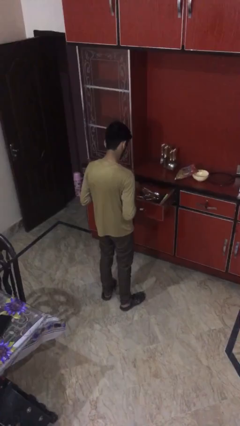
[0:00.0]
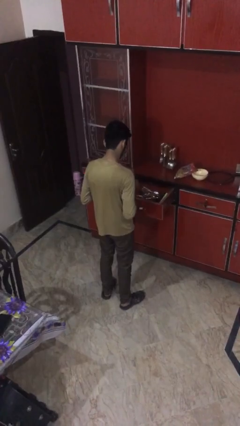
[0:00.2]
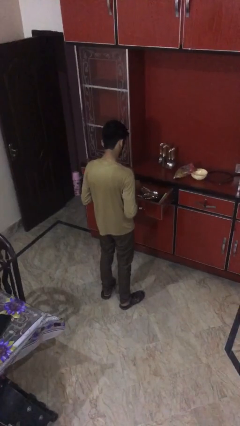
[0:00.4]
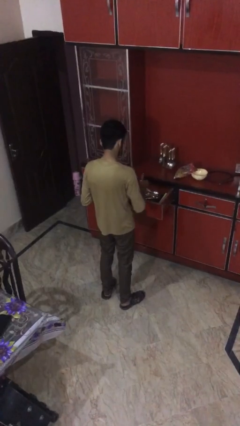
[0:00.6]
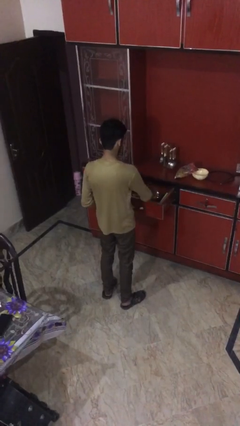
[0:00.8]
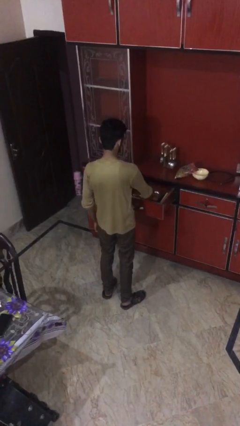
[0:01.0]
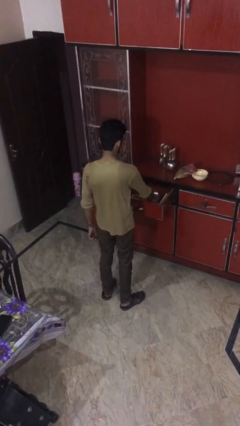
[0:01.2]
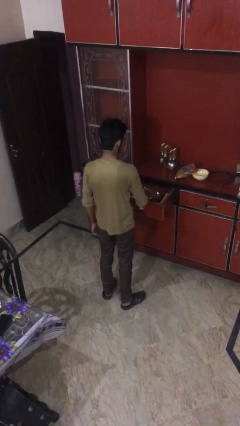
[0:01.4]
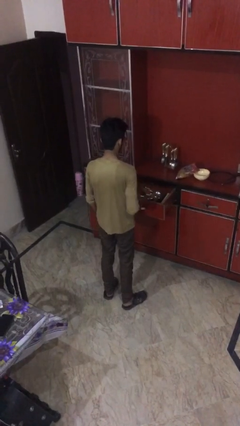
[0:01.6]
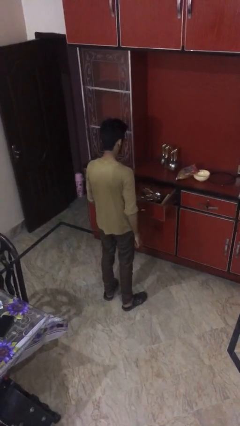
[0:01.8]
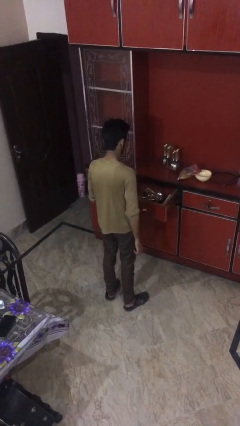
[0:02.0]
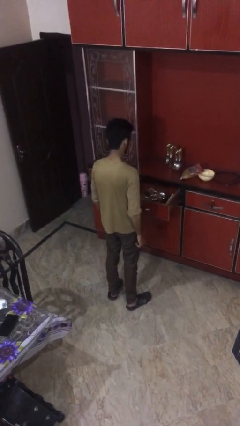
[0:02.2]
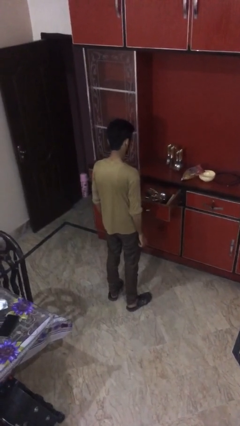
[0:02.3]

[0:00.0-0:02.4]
person puts object into kitchen drawer

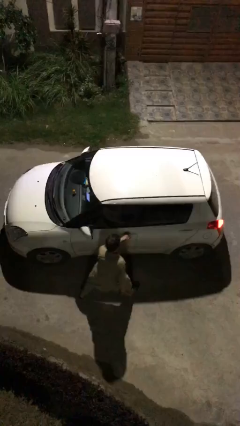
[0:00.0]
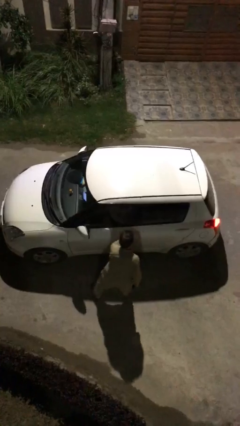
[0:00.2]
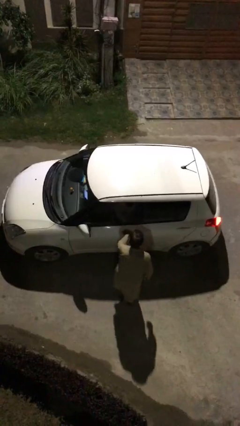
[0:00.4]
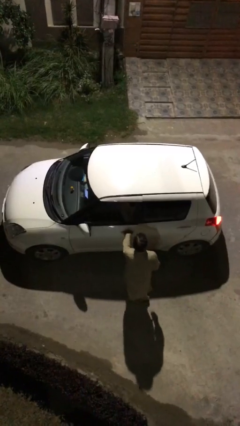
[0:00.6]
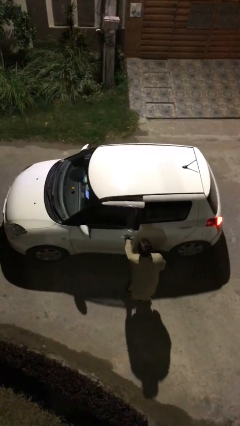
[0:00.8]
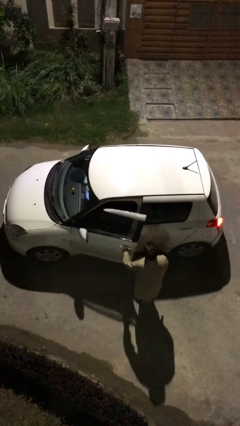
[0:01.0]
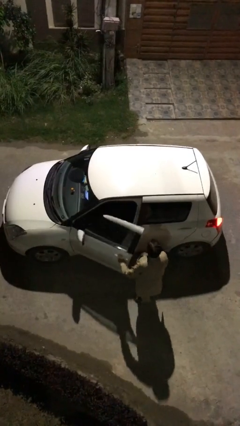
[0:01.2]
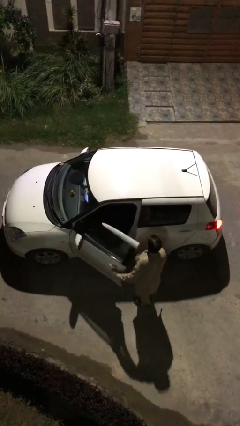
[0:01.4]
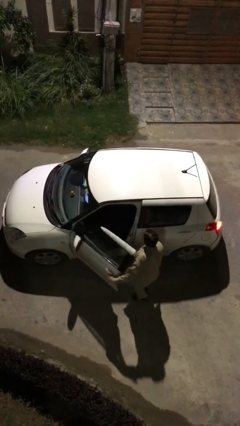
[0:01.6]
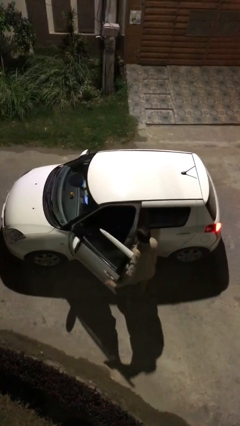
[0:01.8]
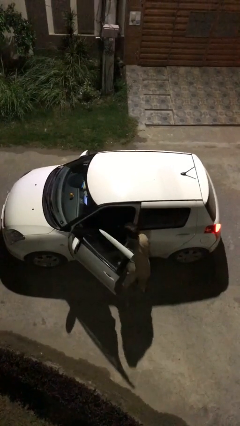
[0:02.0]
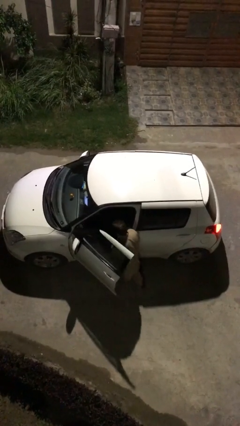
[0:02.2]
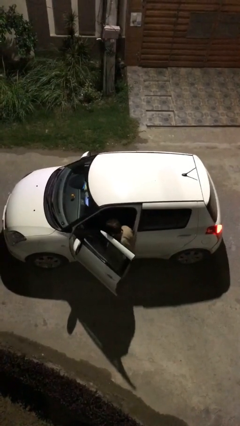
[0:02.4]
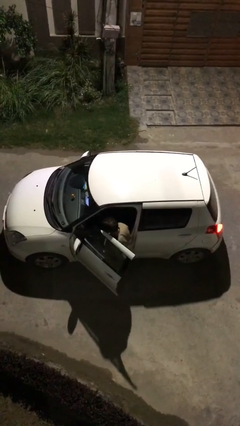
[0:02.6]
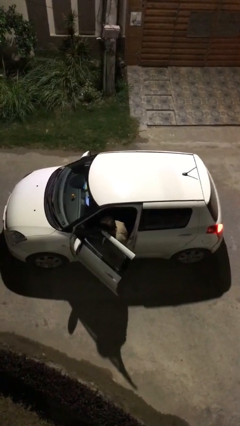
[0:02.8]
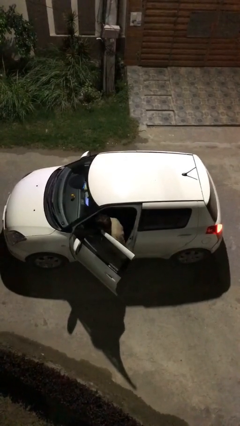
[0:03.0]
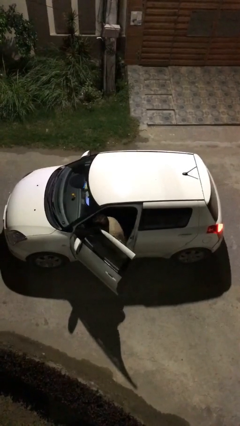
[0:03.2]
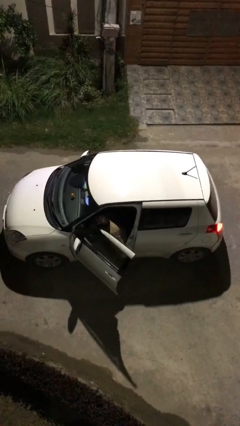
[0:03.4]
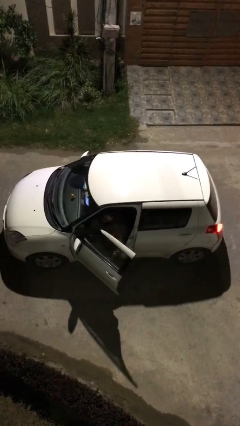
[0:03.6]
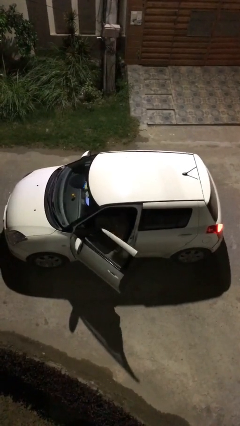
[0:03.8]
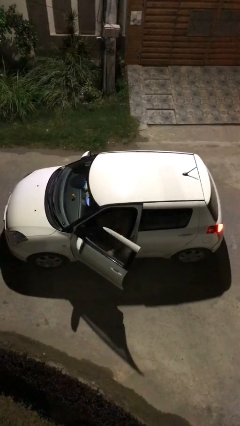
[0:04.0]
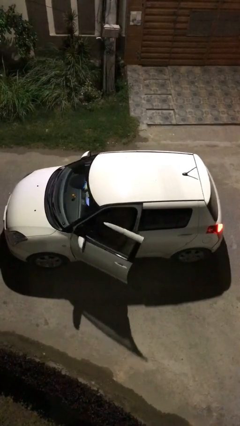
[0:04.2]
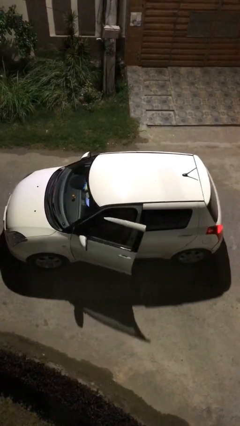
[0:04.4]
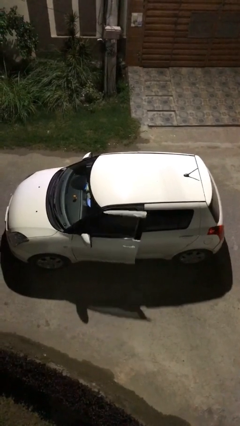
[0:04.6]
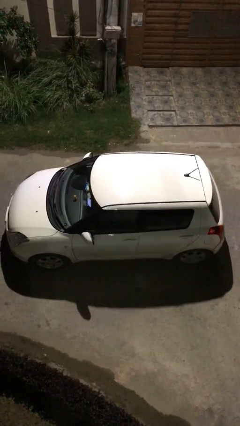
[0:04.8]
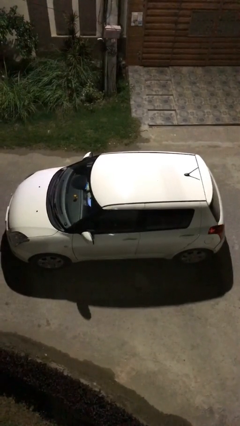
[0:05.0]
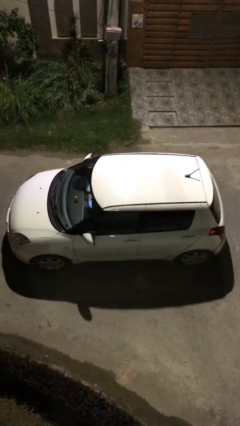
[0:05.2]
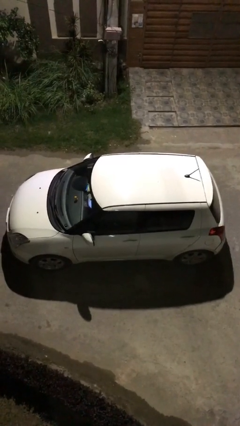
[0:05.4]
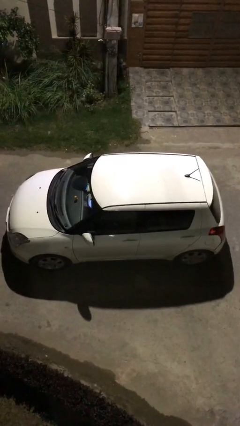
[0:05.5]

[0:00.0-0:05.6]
car picks up person

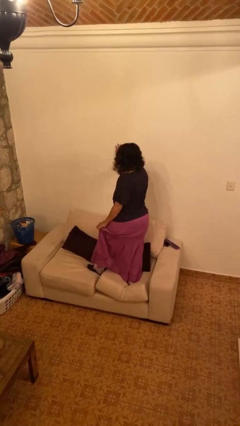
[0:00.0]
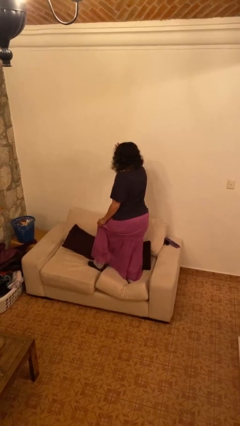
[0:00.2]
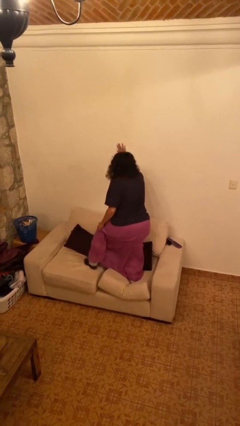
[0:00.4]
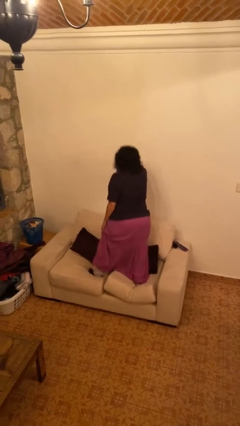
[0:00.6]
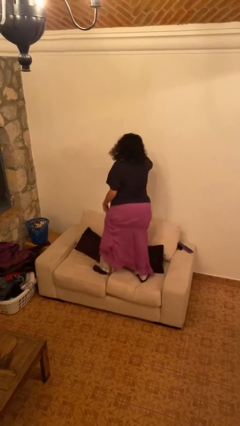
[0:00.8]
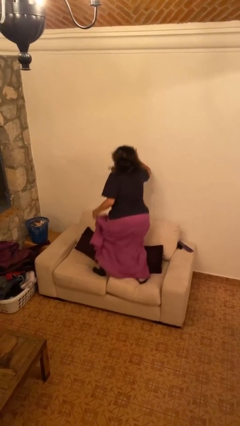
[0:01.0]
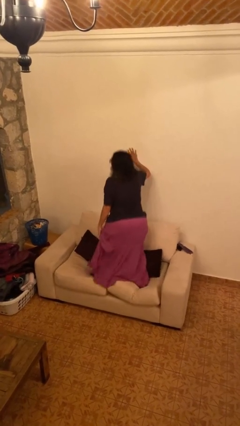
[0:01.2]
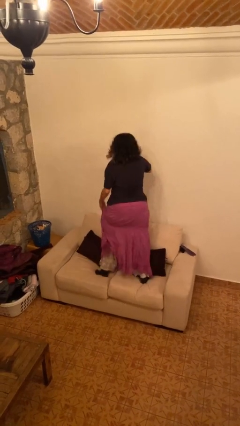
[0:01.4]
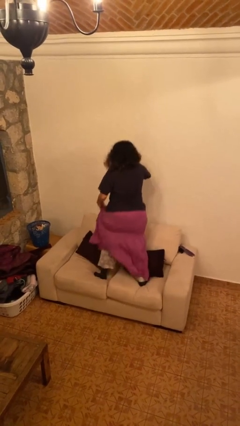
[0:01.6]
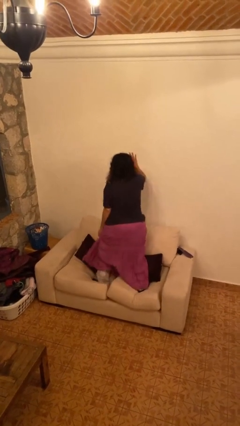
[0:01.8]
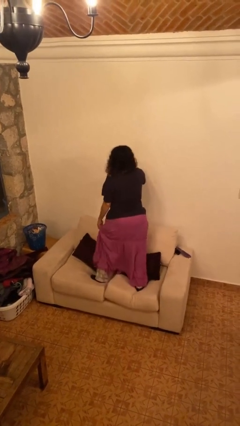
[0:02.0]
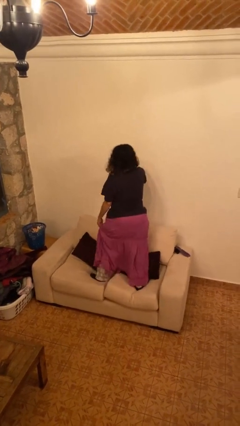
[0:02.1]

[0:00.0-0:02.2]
person jumps on couch

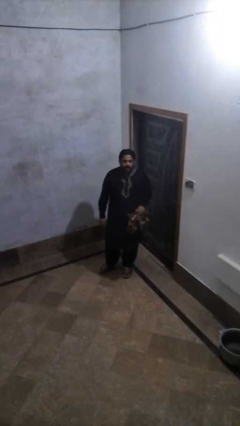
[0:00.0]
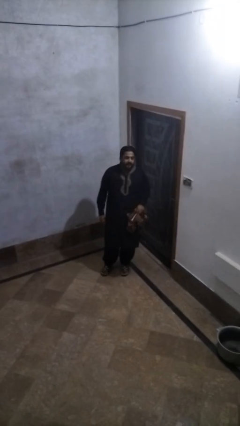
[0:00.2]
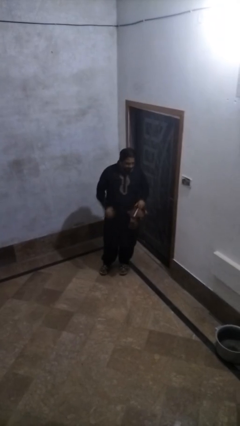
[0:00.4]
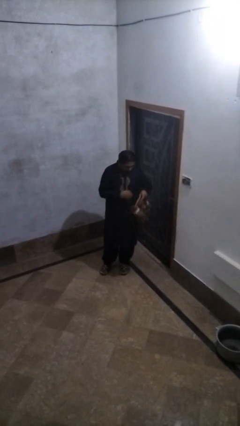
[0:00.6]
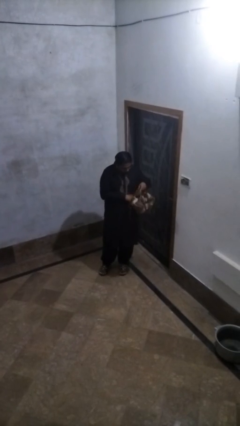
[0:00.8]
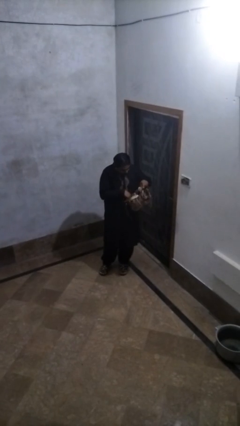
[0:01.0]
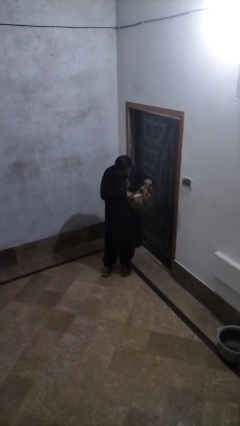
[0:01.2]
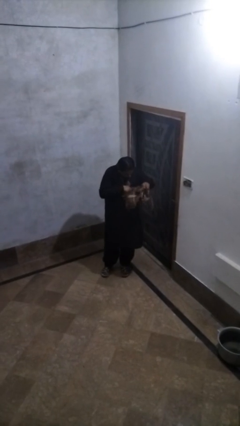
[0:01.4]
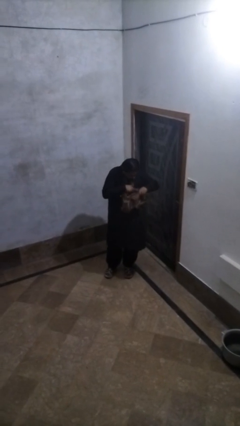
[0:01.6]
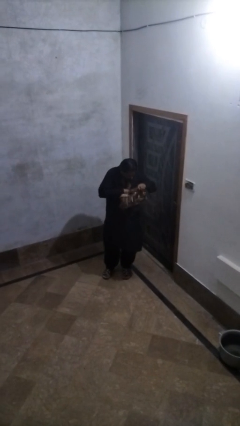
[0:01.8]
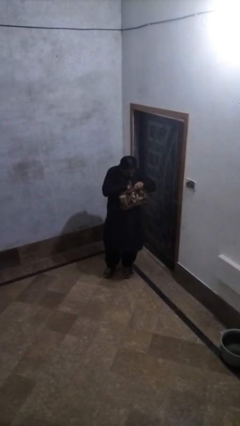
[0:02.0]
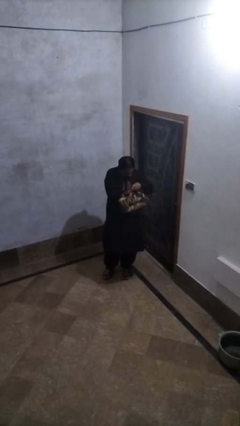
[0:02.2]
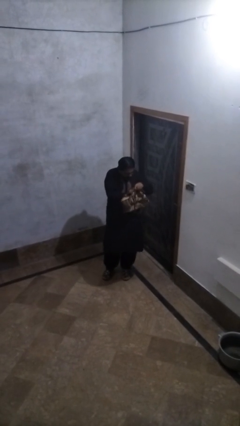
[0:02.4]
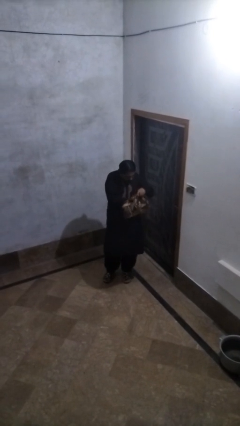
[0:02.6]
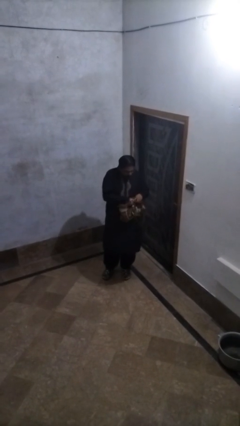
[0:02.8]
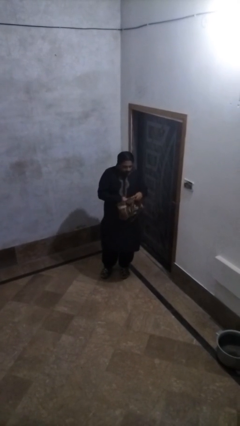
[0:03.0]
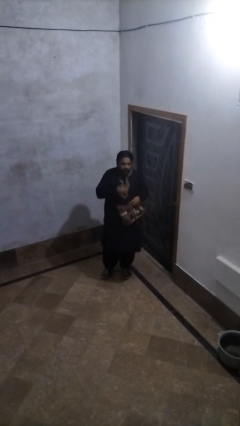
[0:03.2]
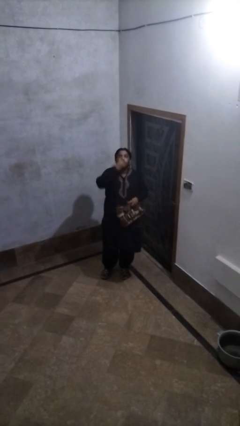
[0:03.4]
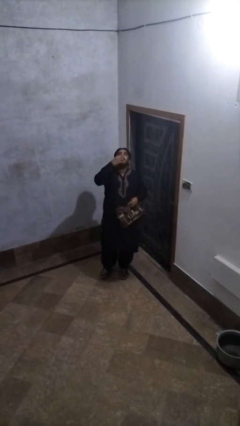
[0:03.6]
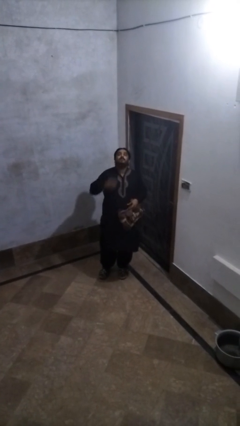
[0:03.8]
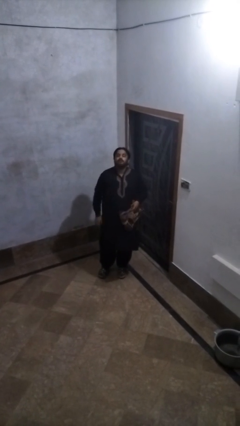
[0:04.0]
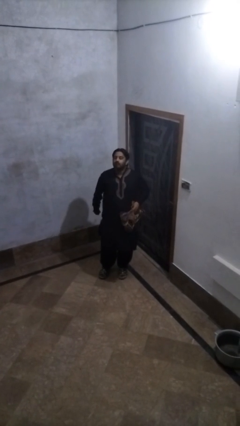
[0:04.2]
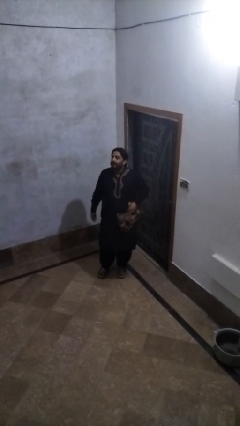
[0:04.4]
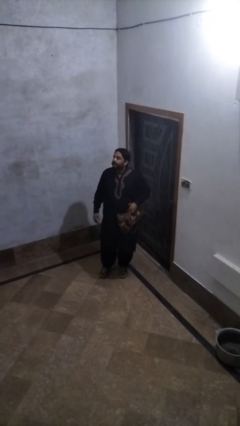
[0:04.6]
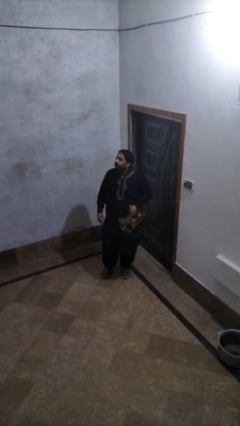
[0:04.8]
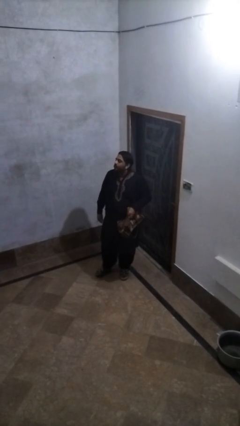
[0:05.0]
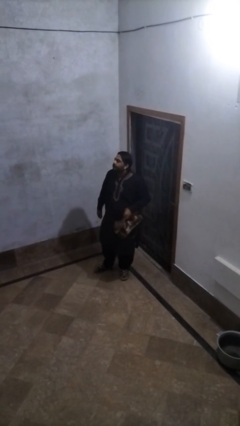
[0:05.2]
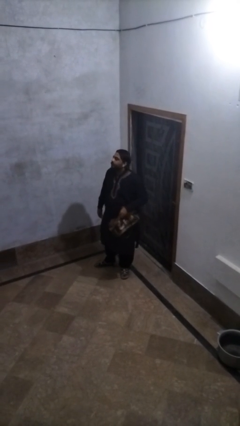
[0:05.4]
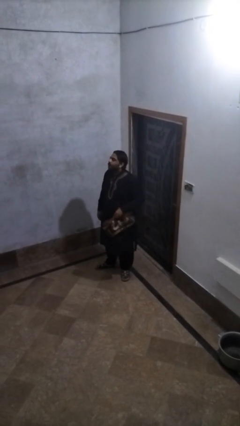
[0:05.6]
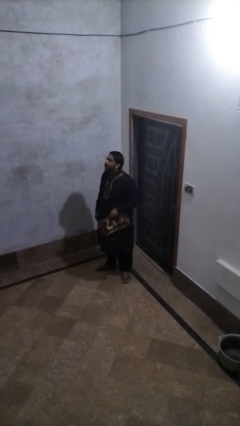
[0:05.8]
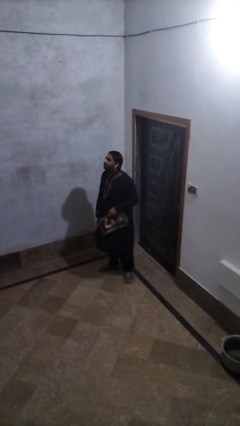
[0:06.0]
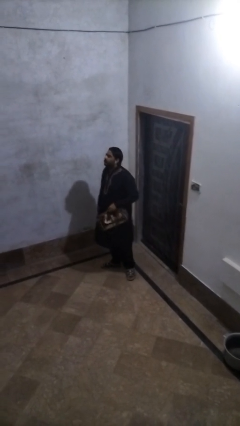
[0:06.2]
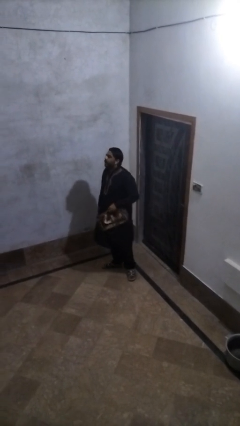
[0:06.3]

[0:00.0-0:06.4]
person eats snack from bag

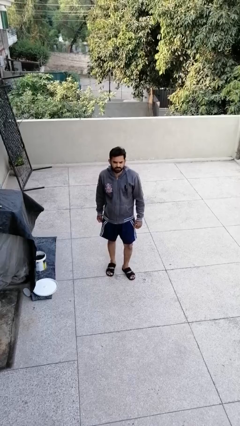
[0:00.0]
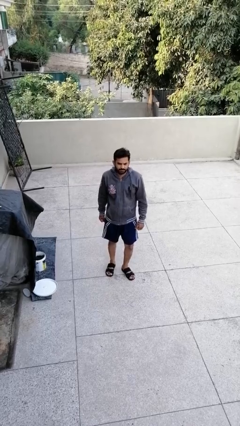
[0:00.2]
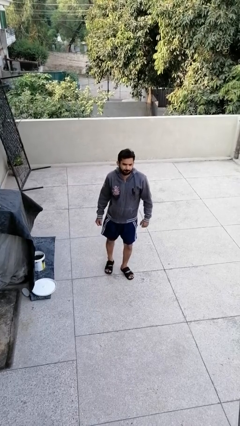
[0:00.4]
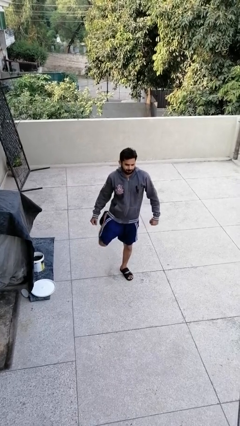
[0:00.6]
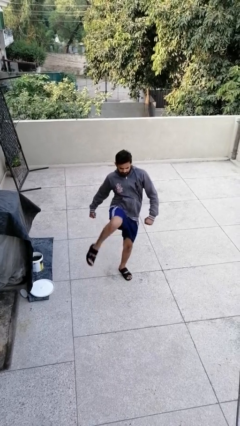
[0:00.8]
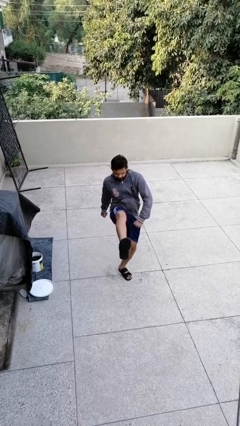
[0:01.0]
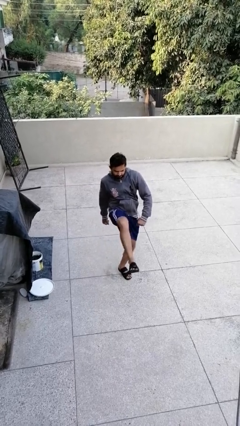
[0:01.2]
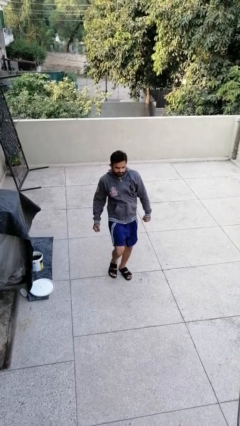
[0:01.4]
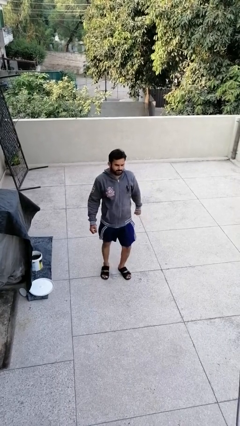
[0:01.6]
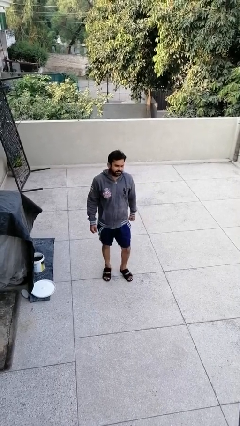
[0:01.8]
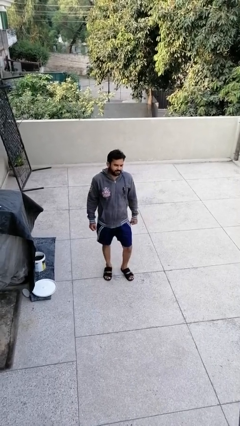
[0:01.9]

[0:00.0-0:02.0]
person karate kicks
